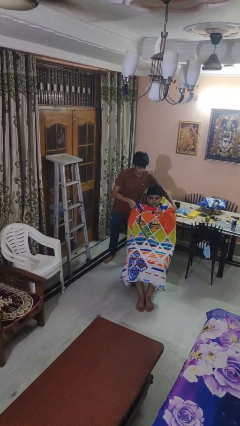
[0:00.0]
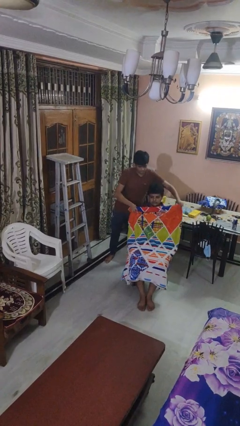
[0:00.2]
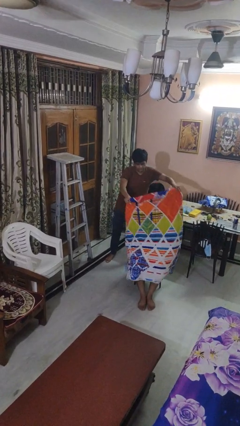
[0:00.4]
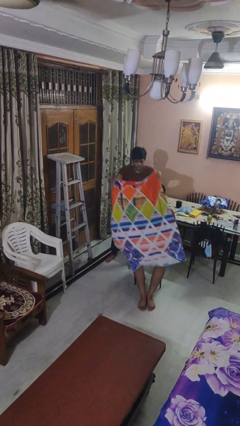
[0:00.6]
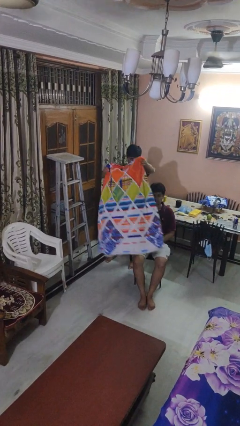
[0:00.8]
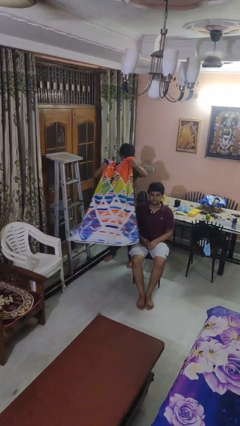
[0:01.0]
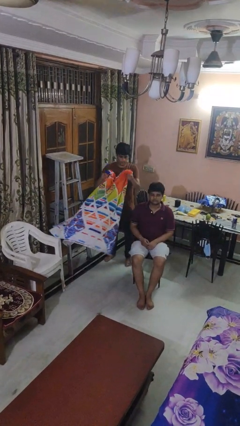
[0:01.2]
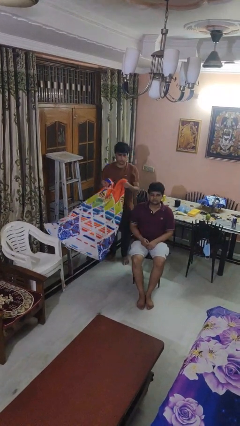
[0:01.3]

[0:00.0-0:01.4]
person uncovers friend with blanket

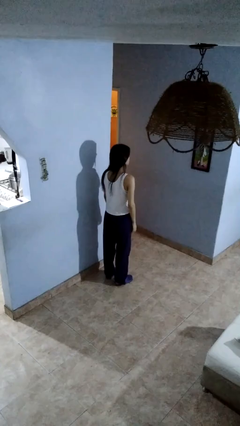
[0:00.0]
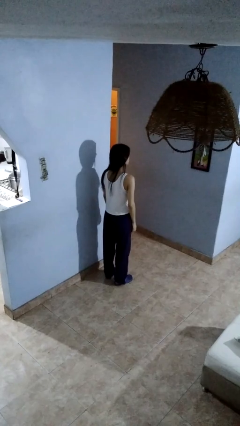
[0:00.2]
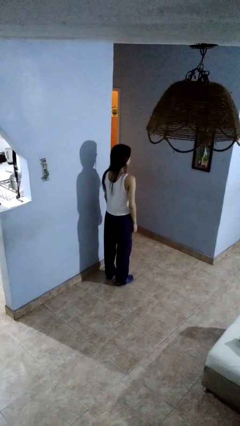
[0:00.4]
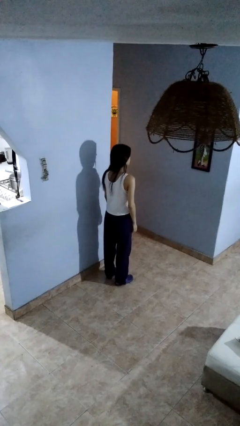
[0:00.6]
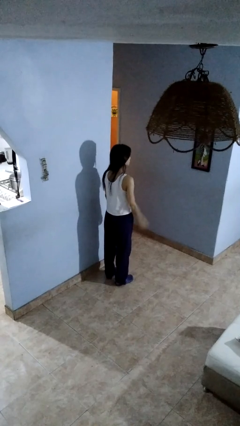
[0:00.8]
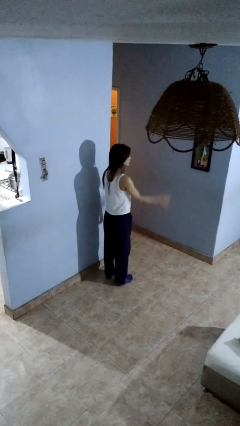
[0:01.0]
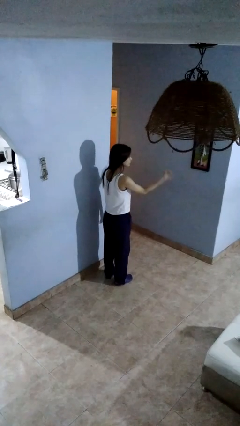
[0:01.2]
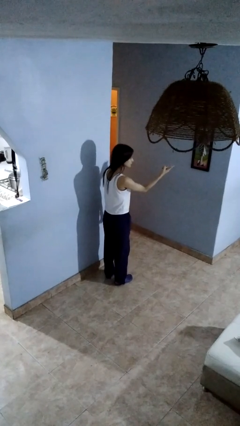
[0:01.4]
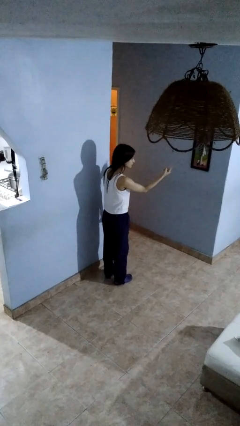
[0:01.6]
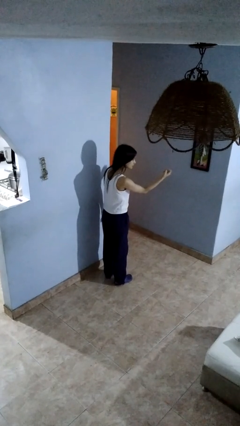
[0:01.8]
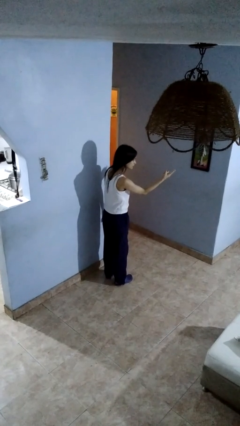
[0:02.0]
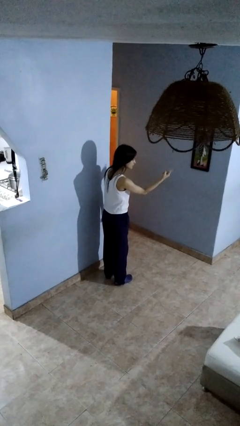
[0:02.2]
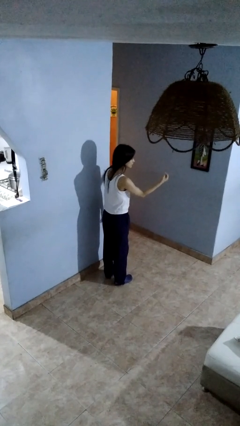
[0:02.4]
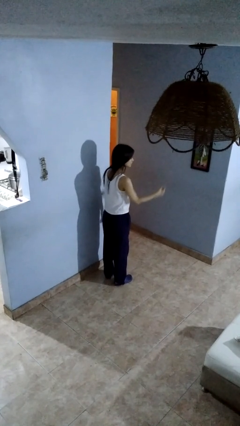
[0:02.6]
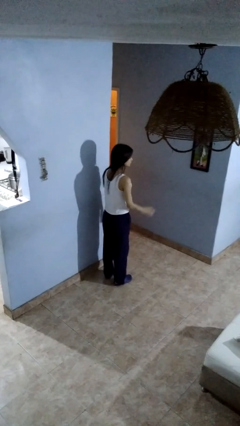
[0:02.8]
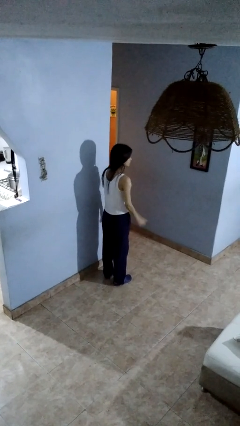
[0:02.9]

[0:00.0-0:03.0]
person gestures come here

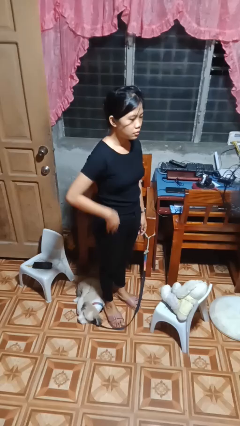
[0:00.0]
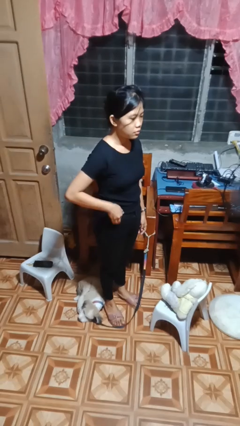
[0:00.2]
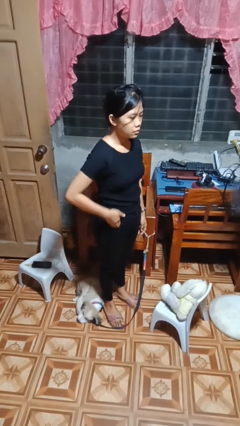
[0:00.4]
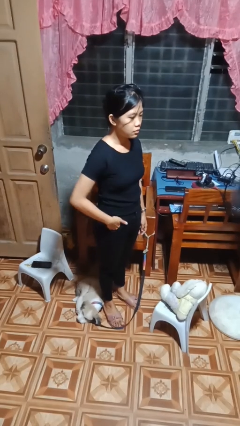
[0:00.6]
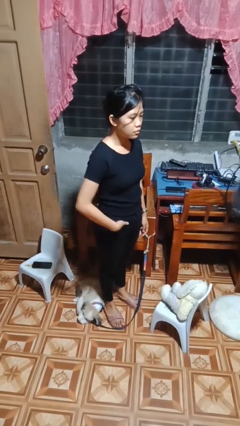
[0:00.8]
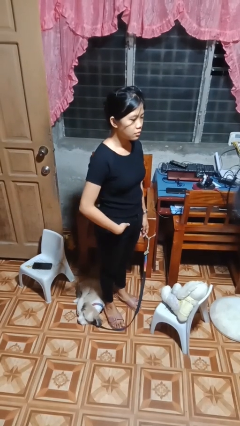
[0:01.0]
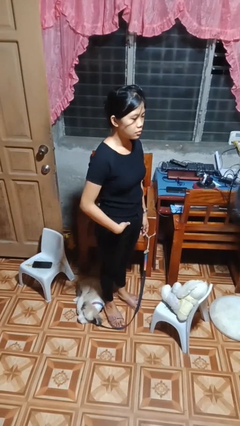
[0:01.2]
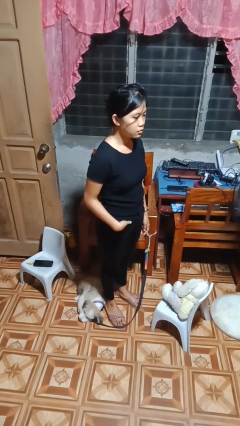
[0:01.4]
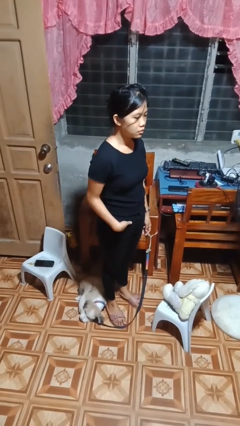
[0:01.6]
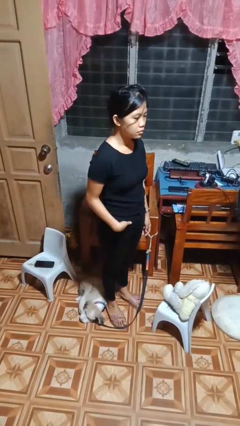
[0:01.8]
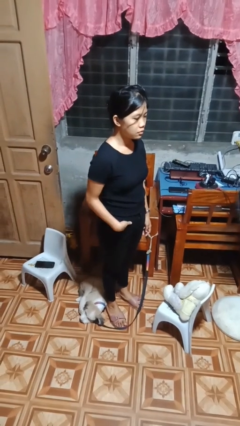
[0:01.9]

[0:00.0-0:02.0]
person puts hands in back pockets

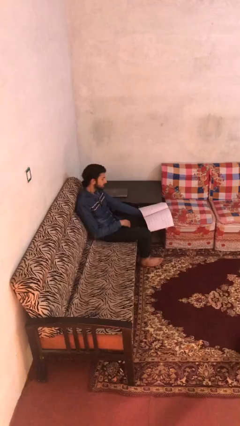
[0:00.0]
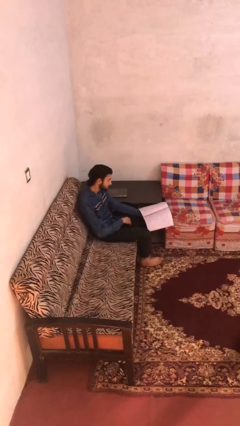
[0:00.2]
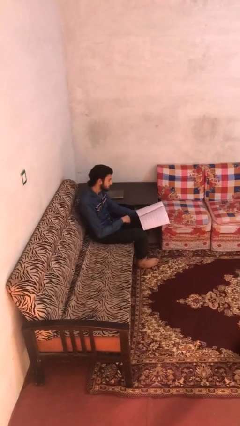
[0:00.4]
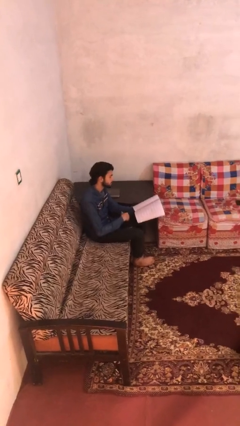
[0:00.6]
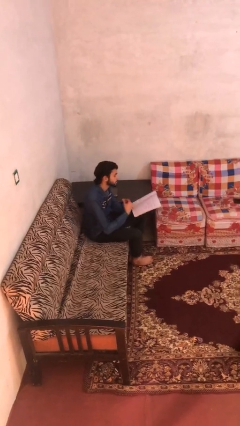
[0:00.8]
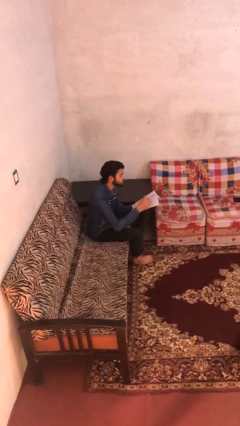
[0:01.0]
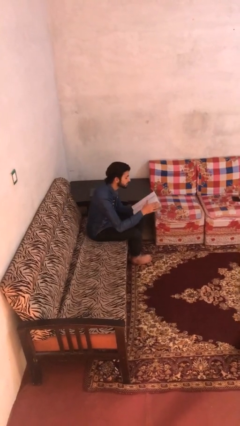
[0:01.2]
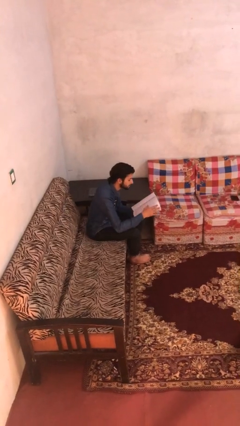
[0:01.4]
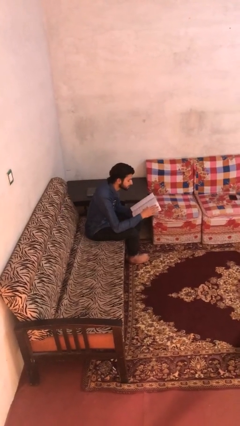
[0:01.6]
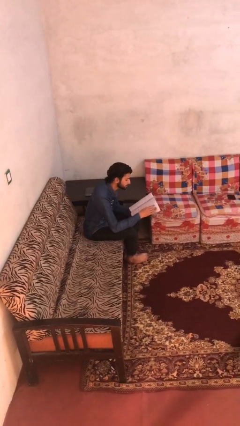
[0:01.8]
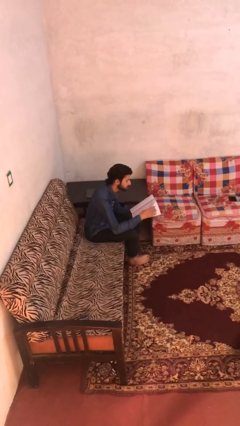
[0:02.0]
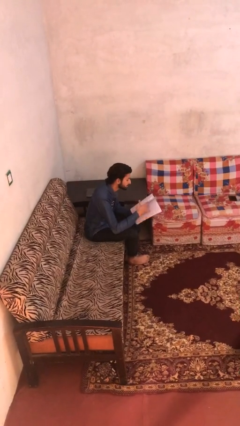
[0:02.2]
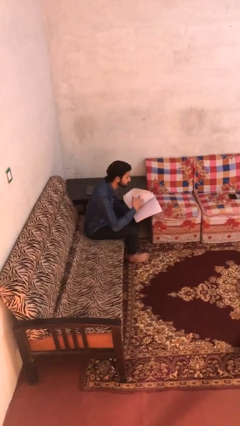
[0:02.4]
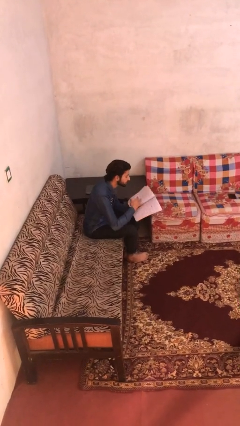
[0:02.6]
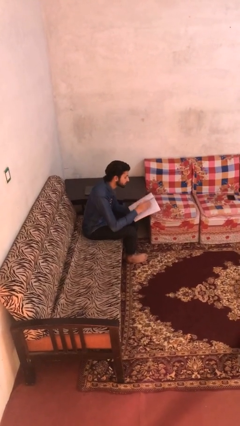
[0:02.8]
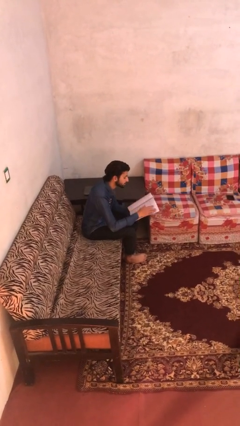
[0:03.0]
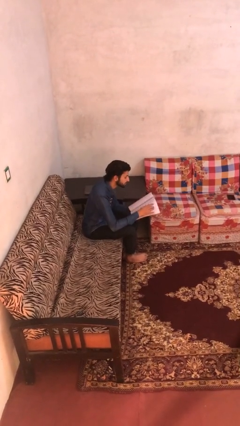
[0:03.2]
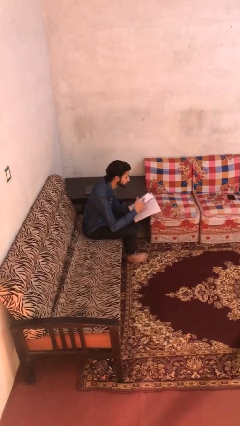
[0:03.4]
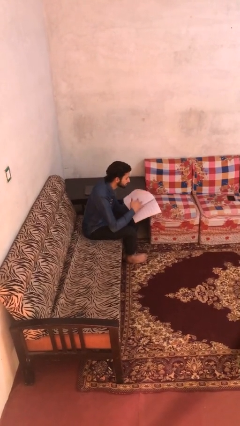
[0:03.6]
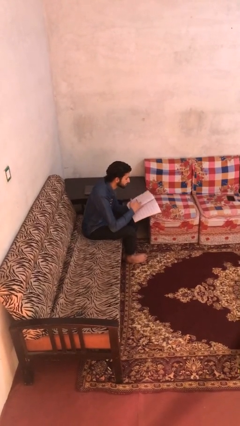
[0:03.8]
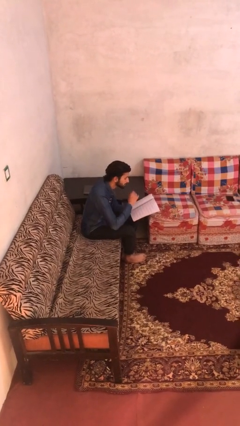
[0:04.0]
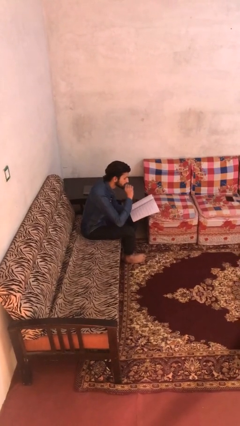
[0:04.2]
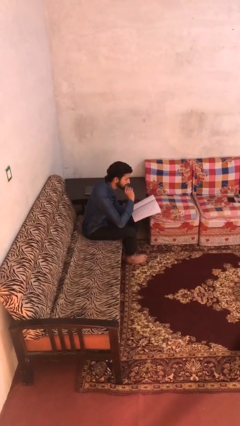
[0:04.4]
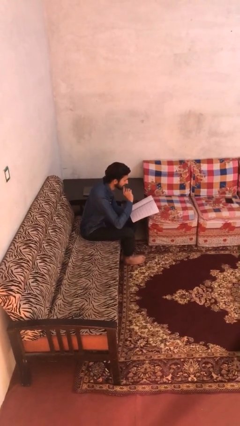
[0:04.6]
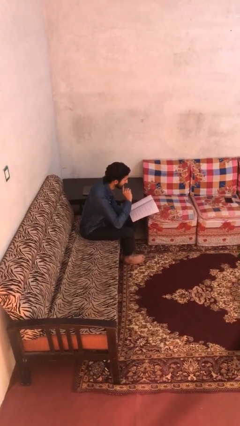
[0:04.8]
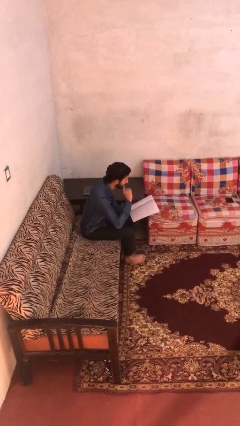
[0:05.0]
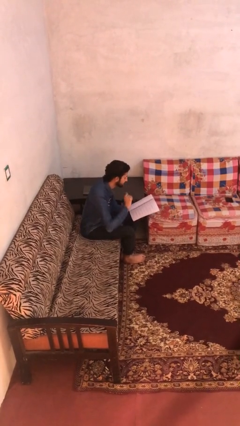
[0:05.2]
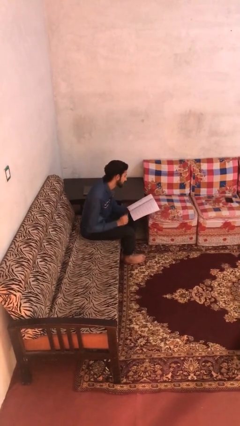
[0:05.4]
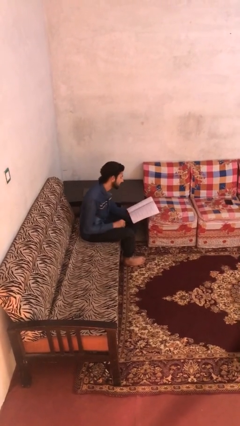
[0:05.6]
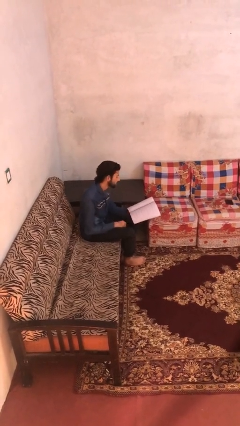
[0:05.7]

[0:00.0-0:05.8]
person reads document

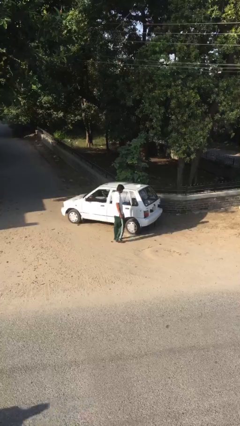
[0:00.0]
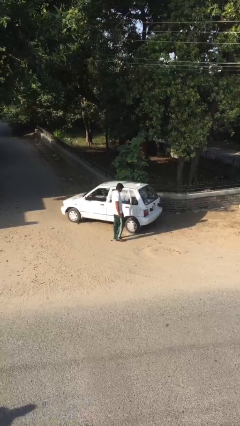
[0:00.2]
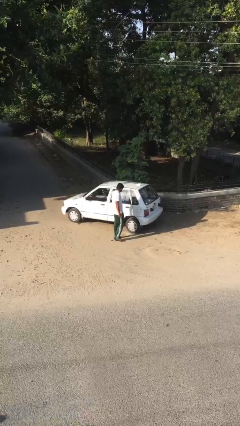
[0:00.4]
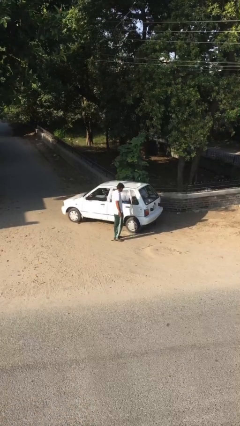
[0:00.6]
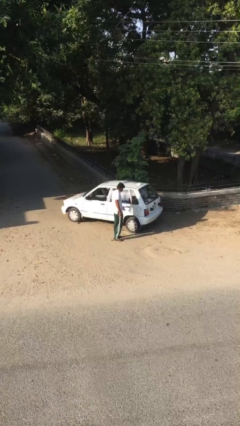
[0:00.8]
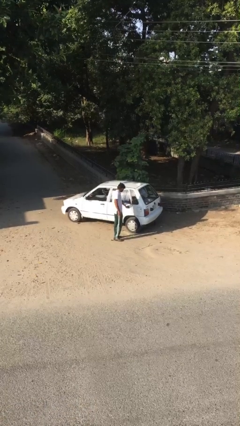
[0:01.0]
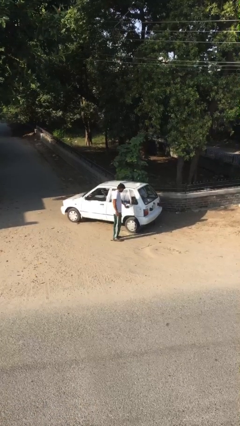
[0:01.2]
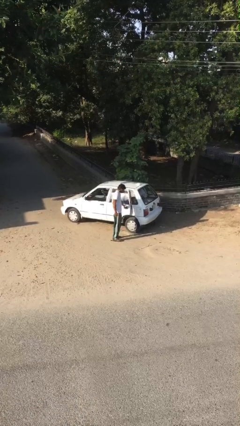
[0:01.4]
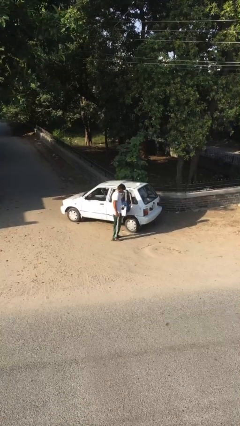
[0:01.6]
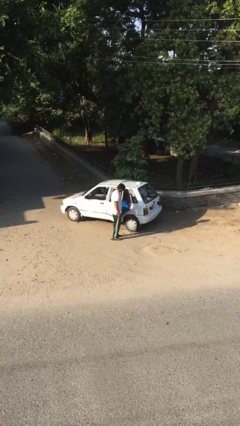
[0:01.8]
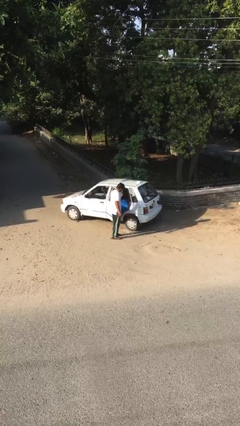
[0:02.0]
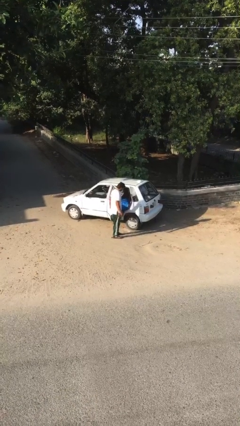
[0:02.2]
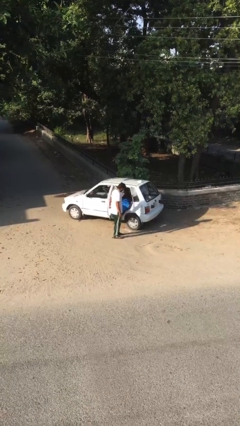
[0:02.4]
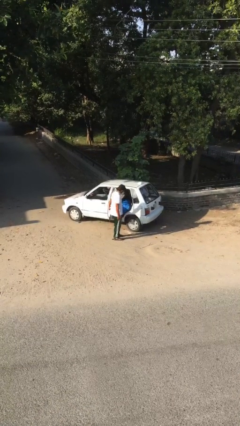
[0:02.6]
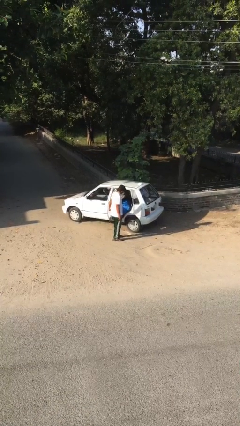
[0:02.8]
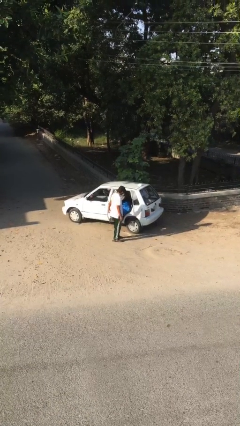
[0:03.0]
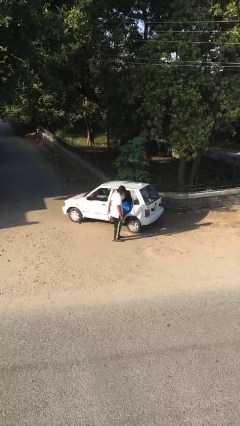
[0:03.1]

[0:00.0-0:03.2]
person opens car door

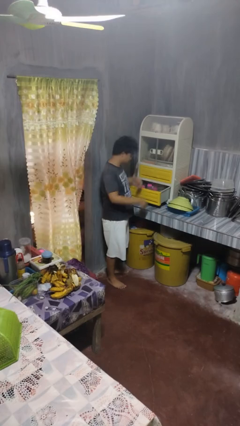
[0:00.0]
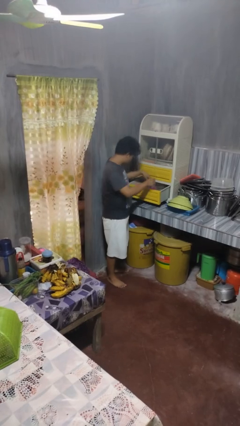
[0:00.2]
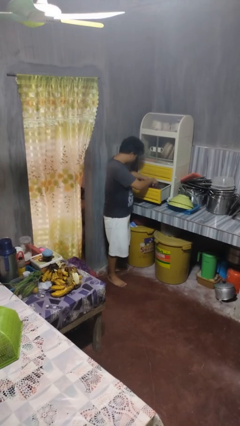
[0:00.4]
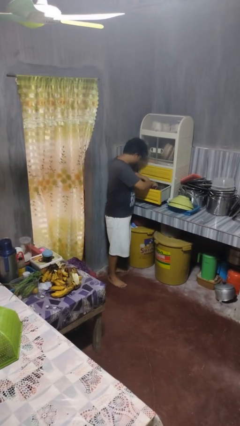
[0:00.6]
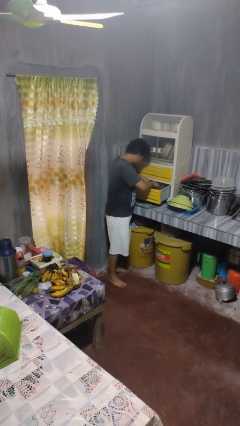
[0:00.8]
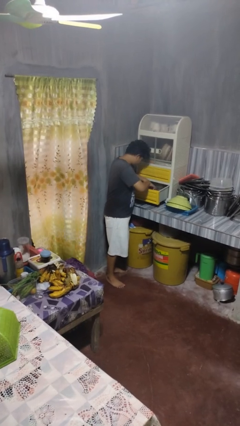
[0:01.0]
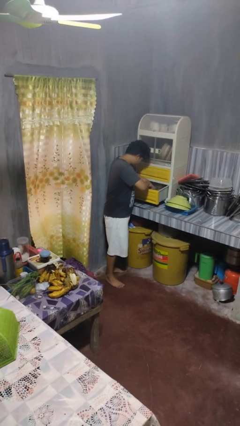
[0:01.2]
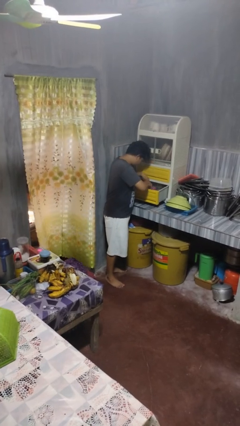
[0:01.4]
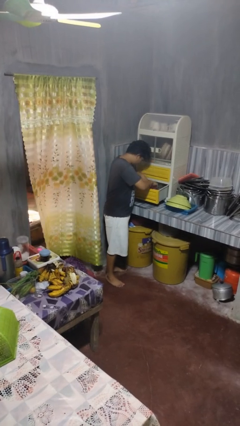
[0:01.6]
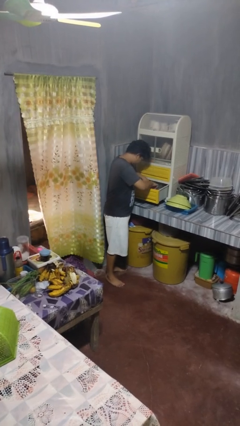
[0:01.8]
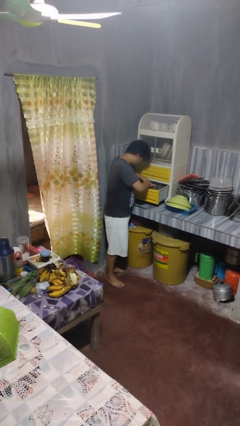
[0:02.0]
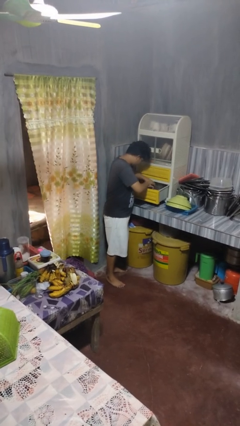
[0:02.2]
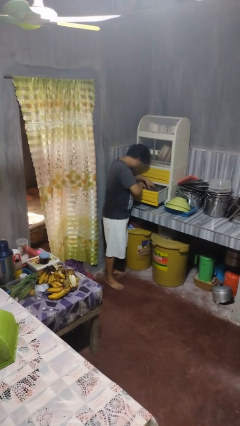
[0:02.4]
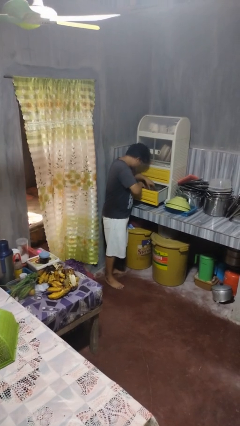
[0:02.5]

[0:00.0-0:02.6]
person searches in kitchen drawer
